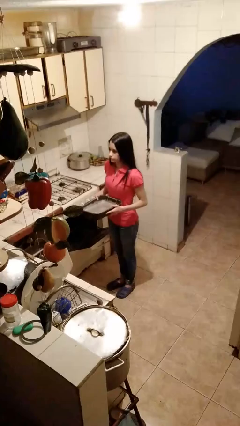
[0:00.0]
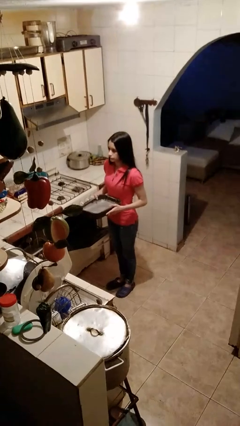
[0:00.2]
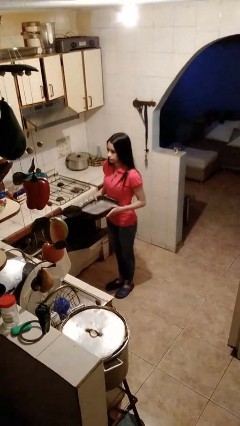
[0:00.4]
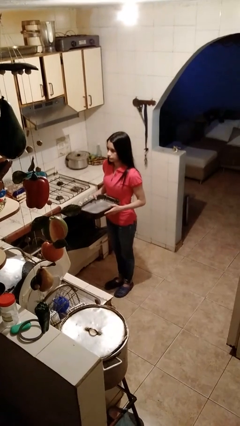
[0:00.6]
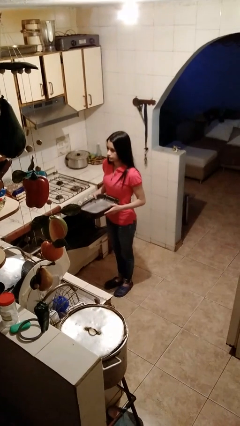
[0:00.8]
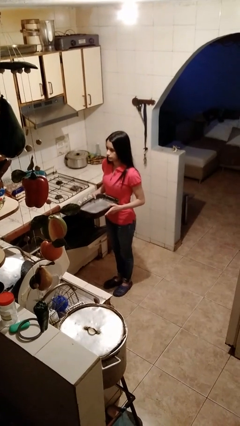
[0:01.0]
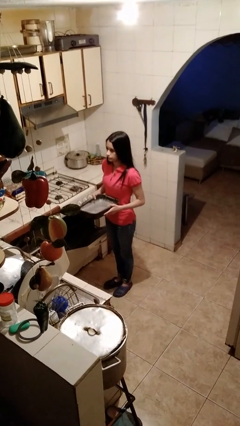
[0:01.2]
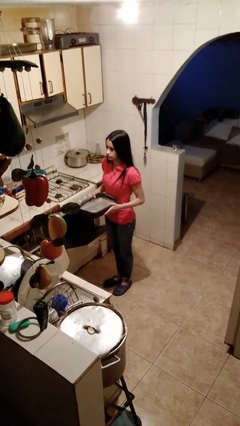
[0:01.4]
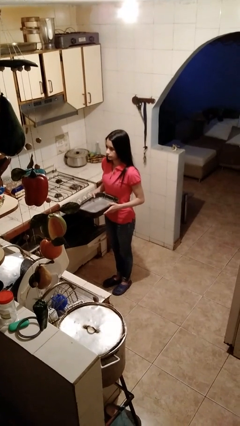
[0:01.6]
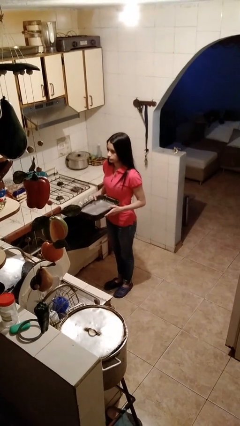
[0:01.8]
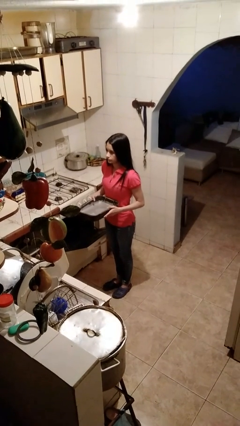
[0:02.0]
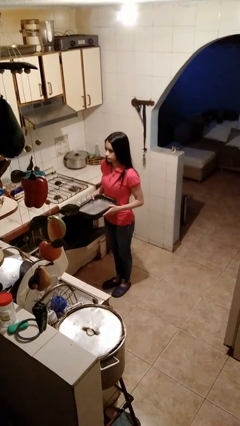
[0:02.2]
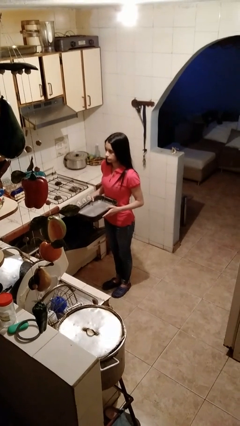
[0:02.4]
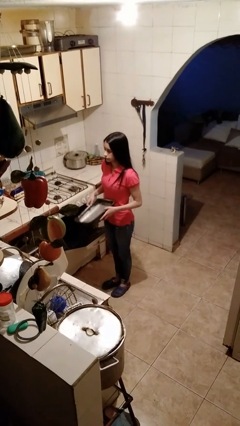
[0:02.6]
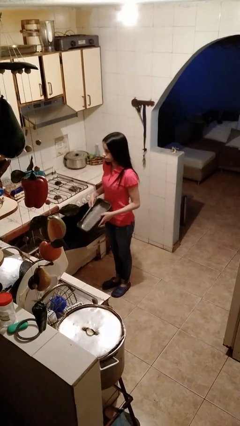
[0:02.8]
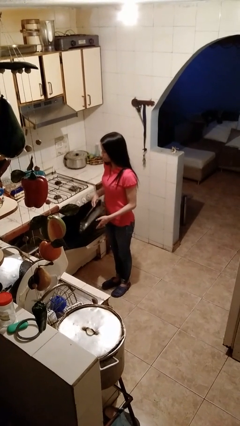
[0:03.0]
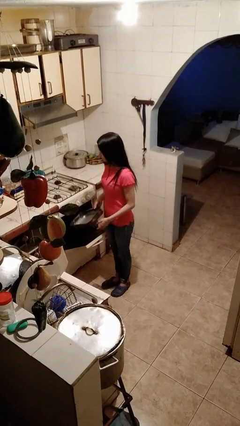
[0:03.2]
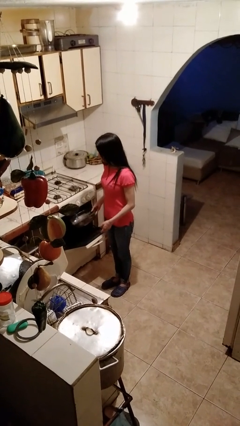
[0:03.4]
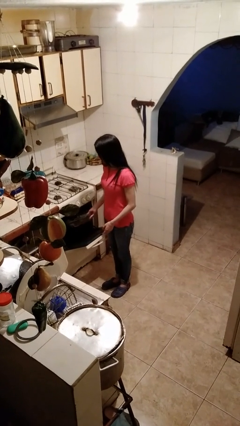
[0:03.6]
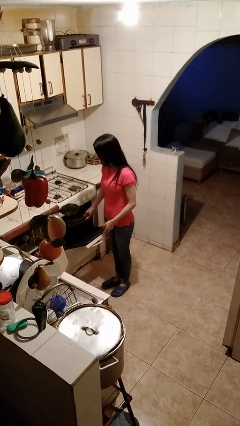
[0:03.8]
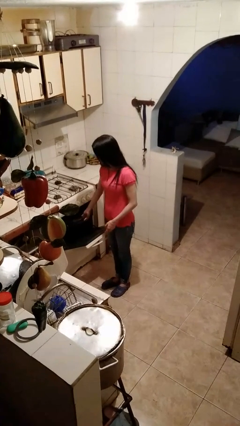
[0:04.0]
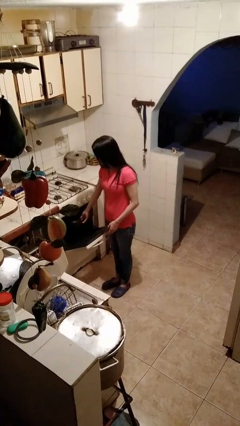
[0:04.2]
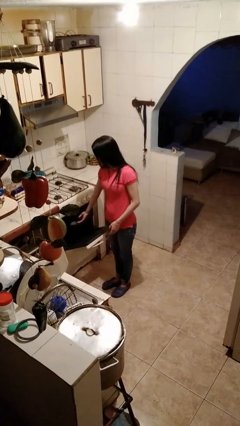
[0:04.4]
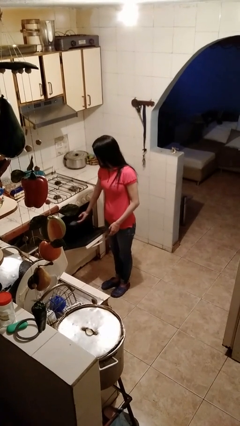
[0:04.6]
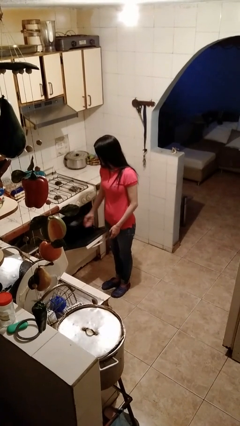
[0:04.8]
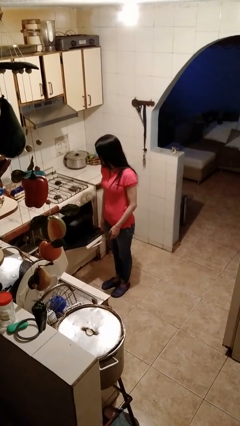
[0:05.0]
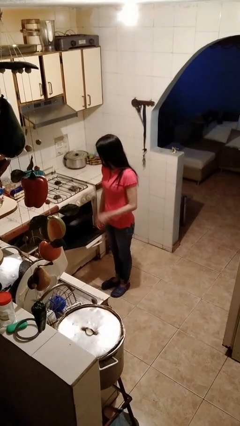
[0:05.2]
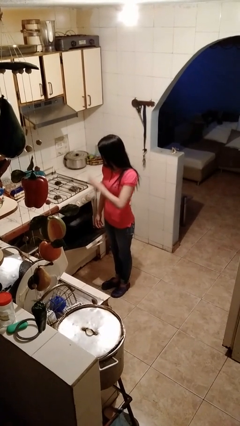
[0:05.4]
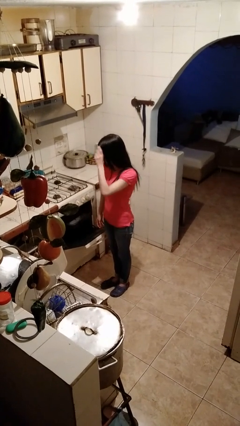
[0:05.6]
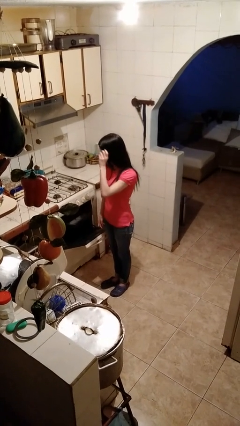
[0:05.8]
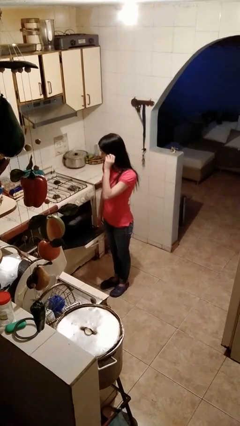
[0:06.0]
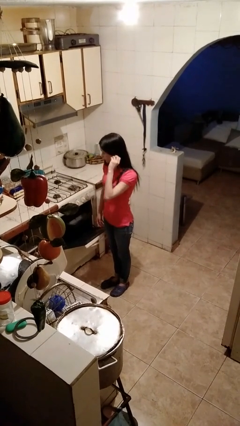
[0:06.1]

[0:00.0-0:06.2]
person puts object into oven

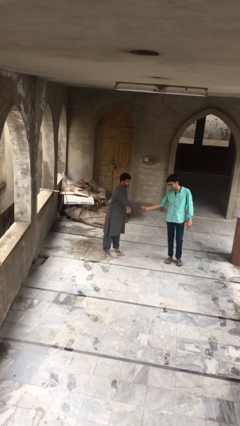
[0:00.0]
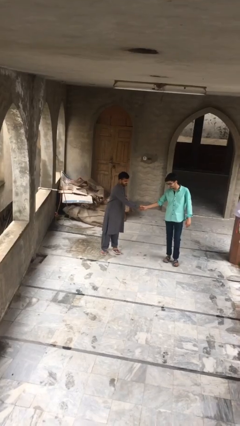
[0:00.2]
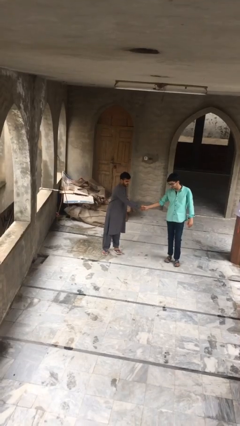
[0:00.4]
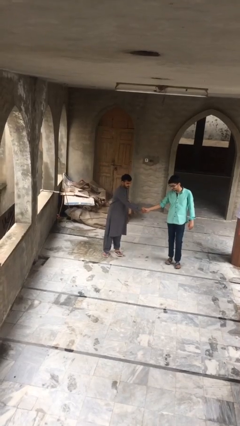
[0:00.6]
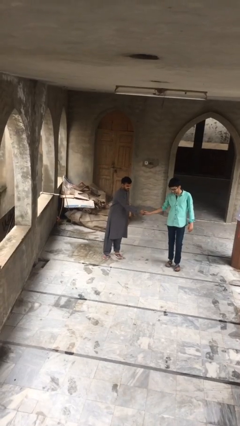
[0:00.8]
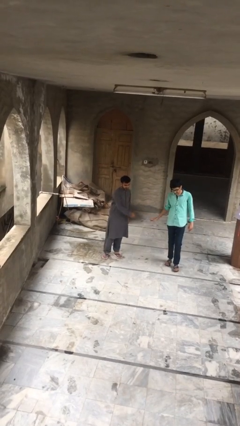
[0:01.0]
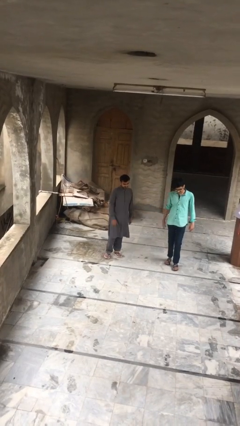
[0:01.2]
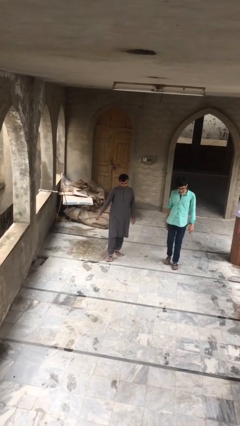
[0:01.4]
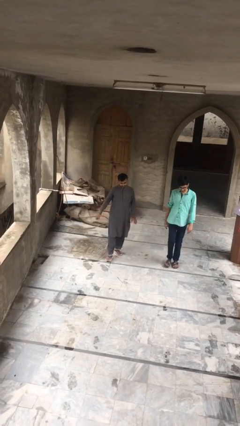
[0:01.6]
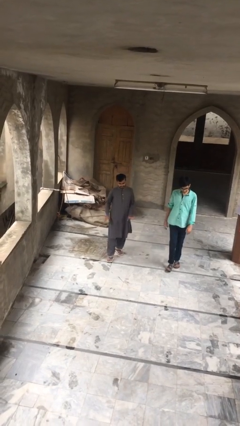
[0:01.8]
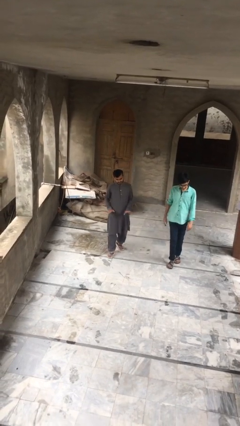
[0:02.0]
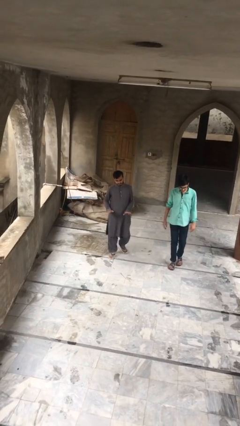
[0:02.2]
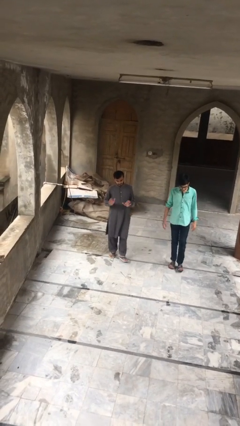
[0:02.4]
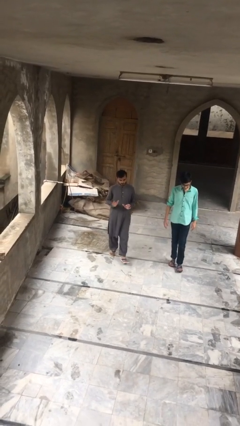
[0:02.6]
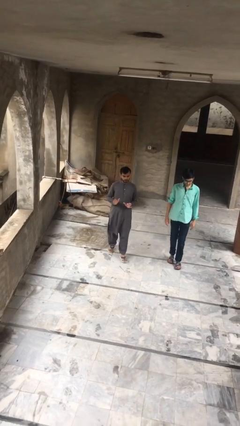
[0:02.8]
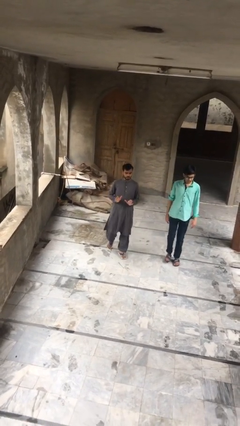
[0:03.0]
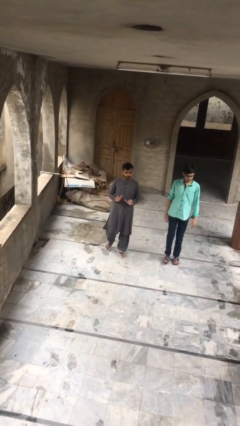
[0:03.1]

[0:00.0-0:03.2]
person talks to person

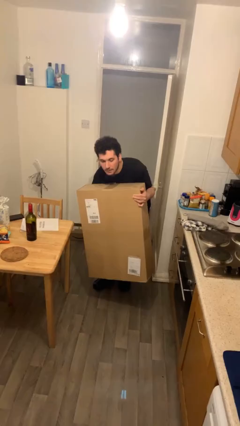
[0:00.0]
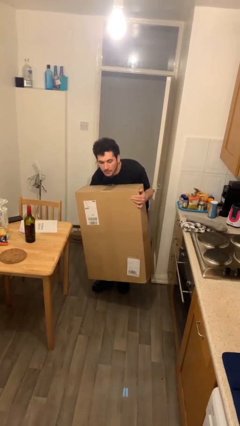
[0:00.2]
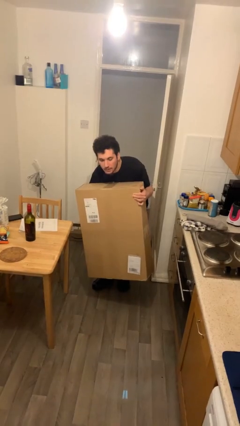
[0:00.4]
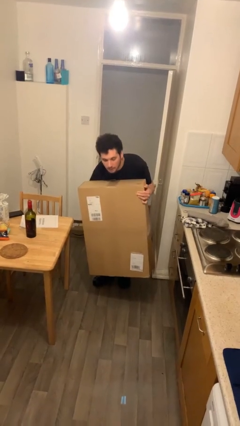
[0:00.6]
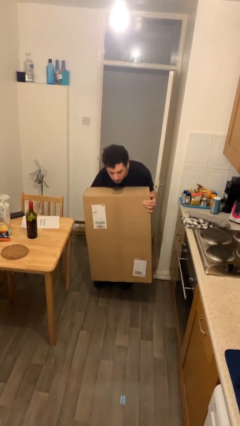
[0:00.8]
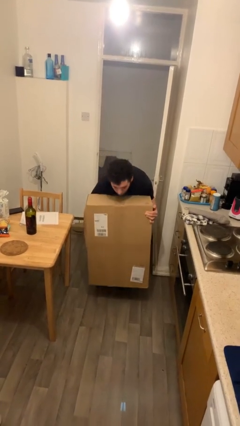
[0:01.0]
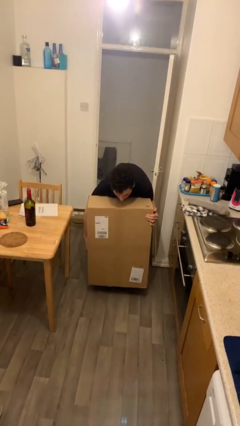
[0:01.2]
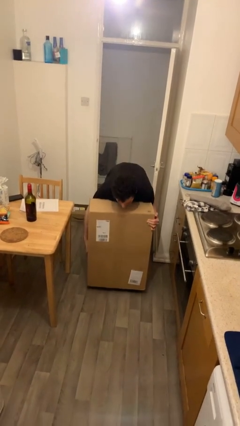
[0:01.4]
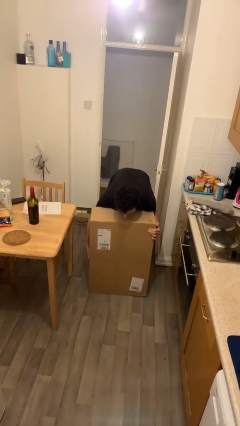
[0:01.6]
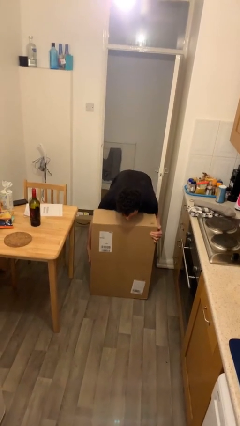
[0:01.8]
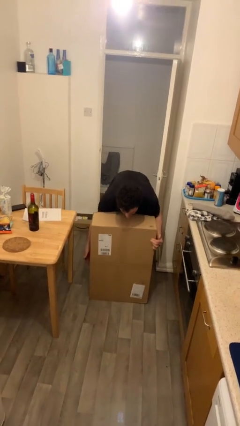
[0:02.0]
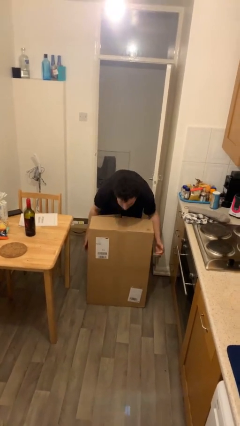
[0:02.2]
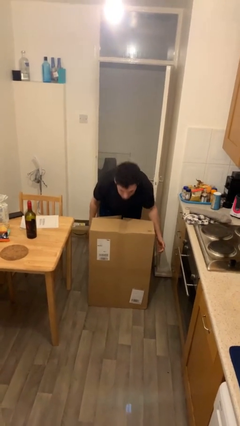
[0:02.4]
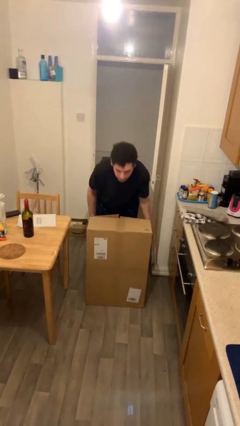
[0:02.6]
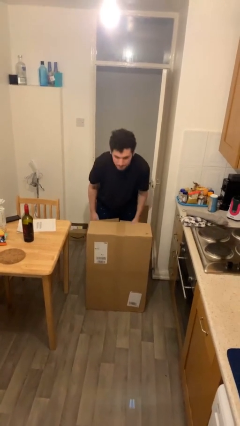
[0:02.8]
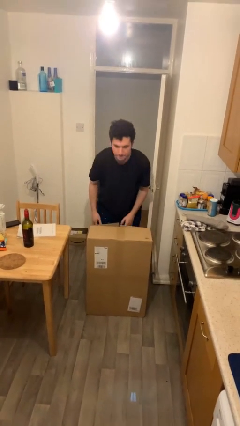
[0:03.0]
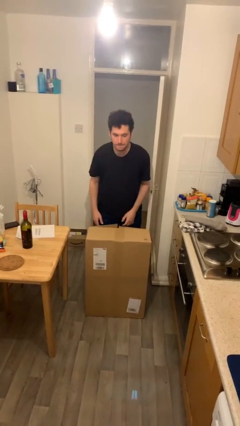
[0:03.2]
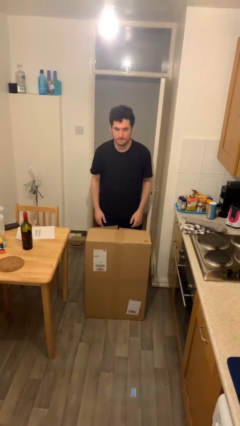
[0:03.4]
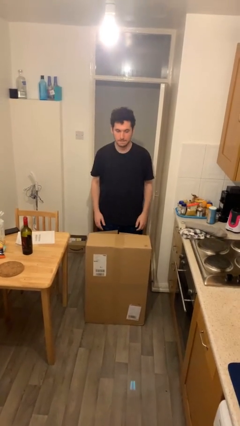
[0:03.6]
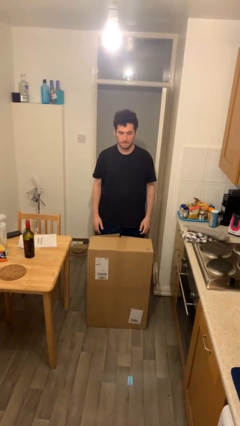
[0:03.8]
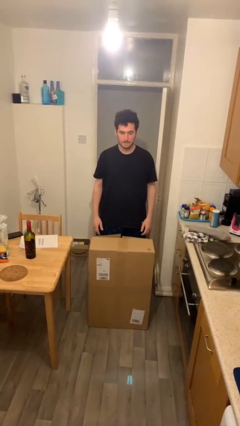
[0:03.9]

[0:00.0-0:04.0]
person puts down object on floor

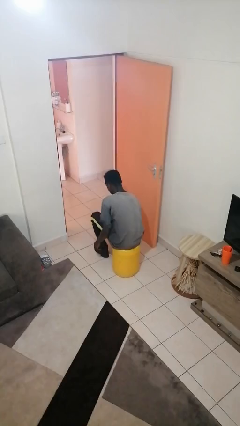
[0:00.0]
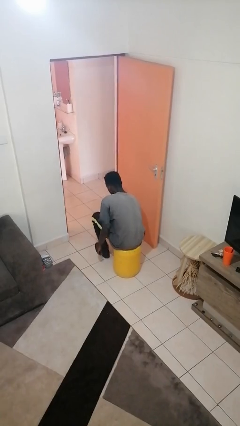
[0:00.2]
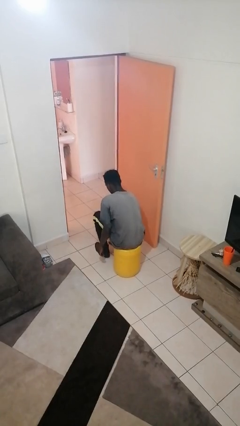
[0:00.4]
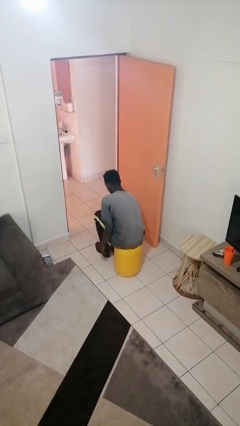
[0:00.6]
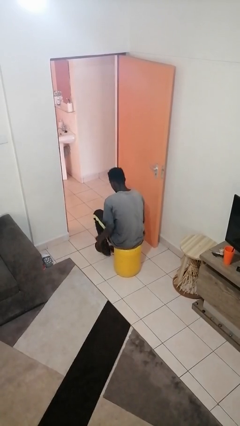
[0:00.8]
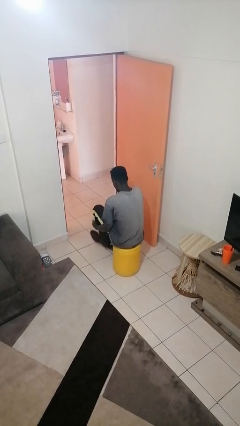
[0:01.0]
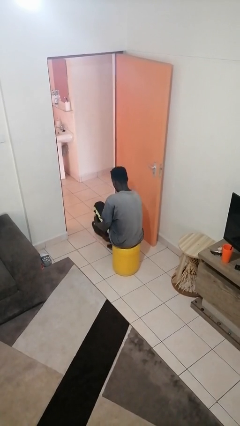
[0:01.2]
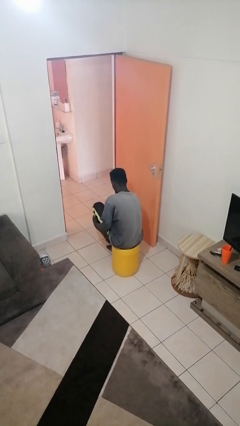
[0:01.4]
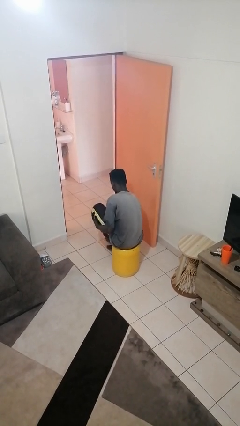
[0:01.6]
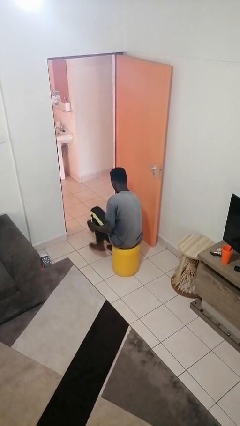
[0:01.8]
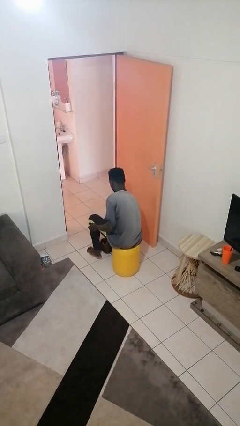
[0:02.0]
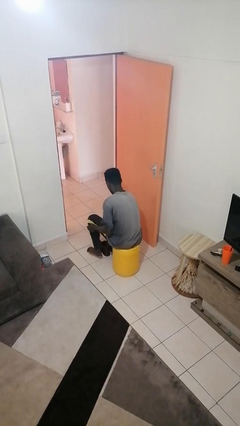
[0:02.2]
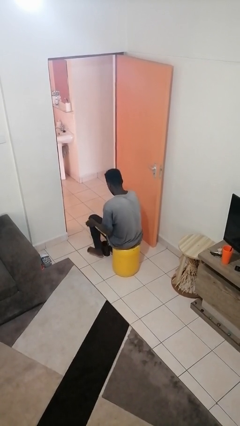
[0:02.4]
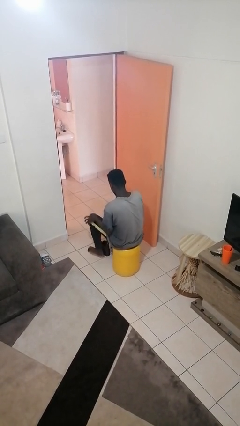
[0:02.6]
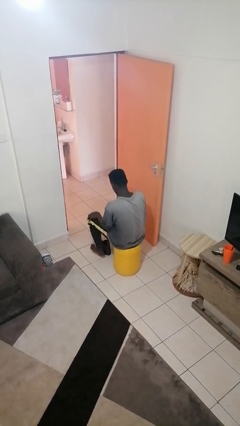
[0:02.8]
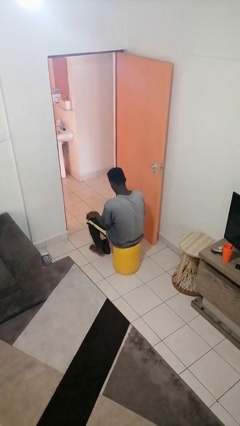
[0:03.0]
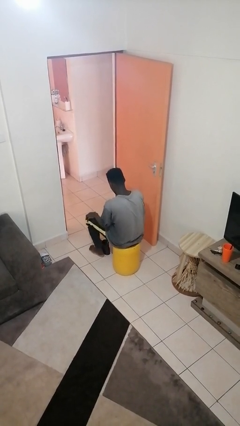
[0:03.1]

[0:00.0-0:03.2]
person takes off shoes

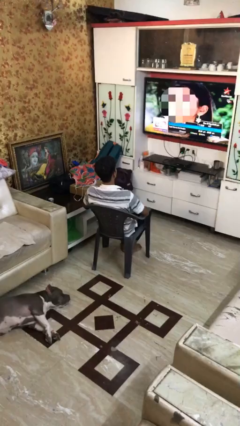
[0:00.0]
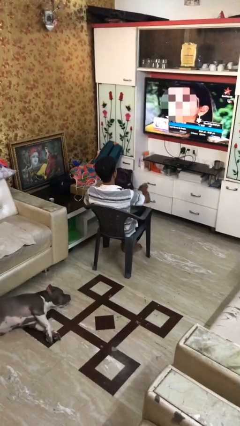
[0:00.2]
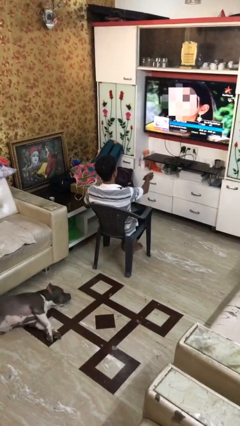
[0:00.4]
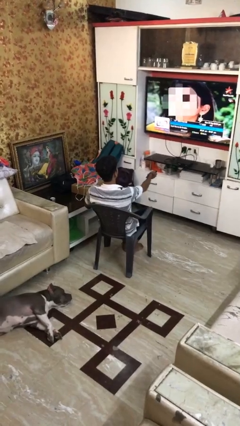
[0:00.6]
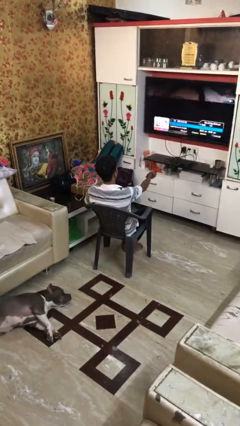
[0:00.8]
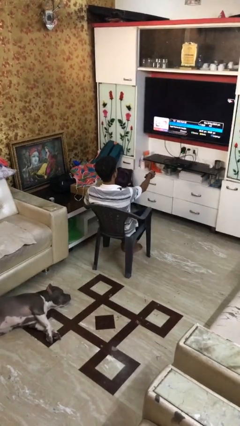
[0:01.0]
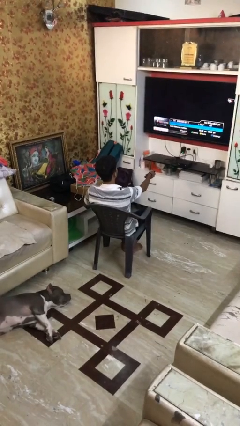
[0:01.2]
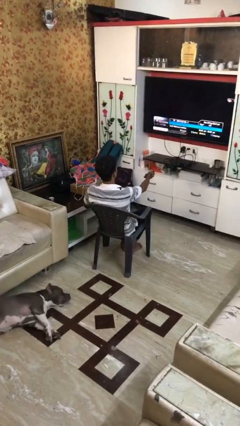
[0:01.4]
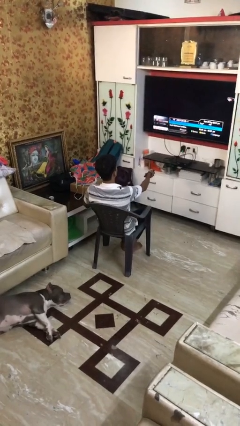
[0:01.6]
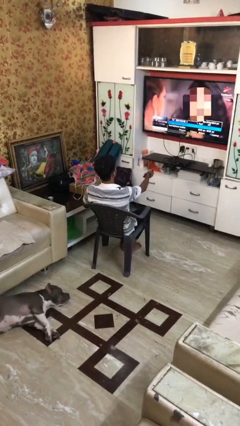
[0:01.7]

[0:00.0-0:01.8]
person uses television remote
